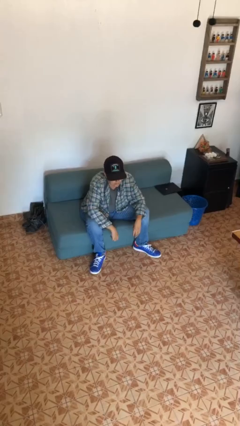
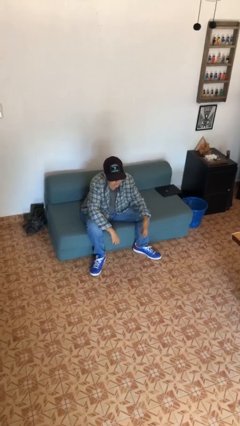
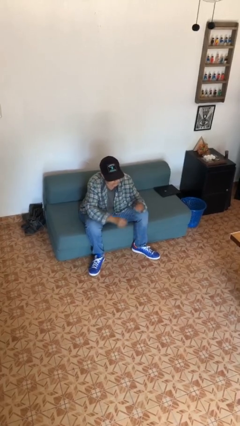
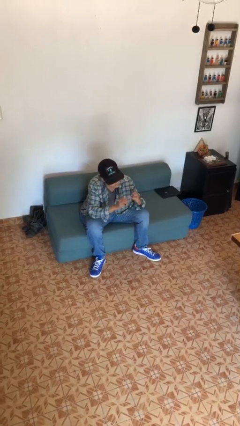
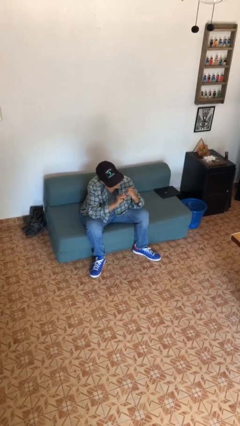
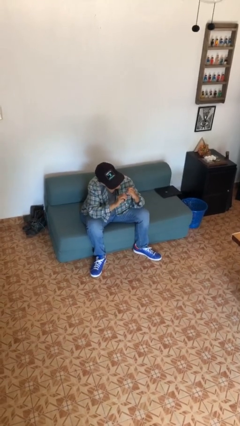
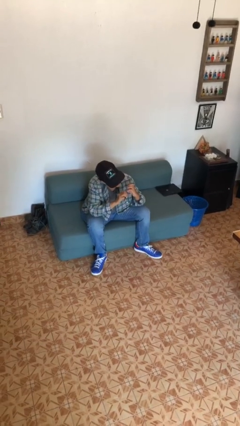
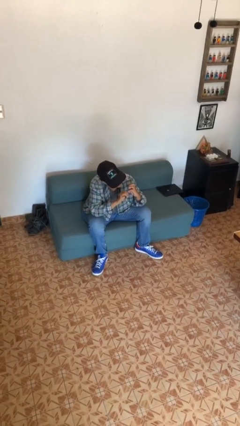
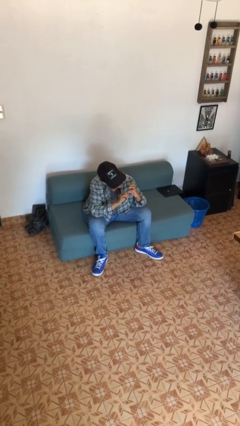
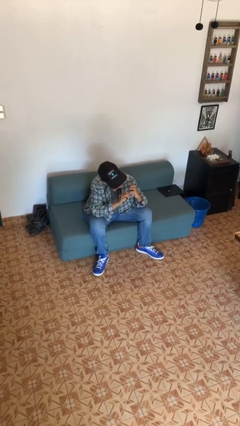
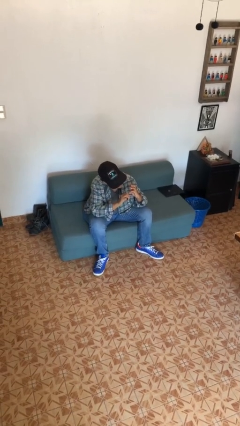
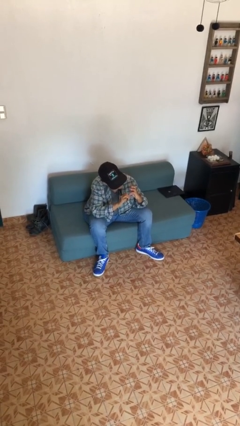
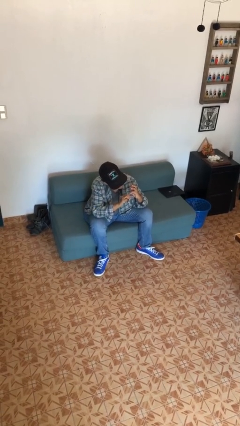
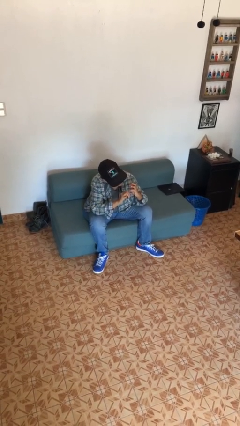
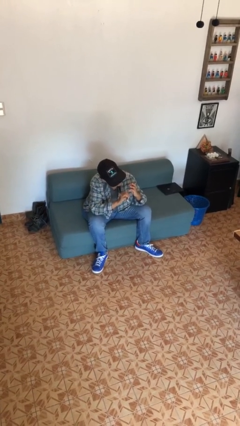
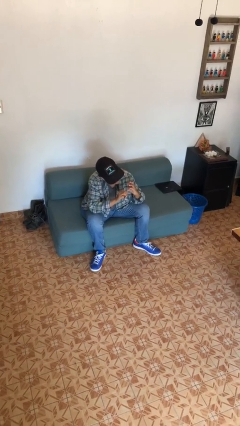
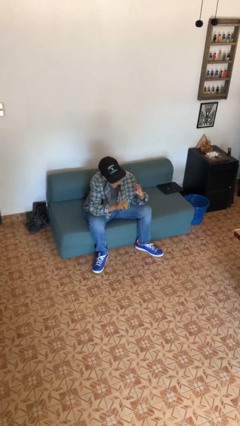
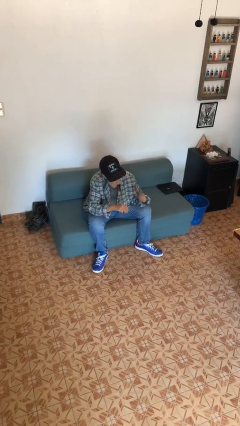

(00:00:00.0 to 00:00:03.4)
person files fingernails

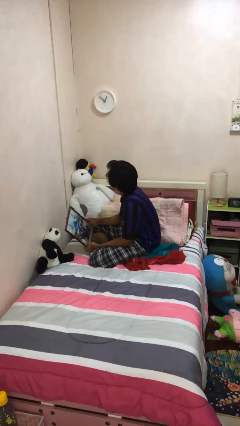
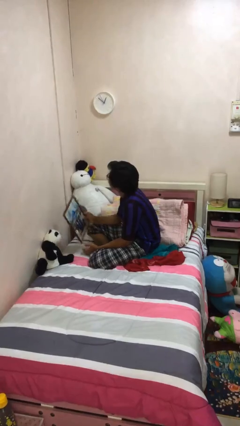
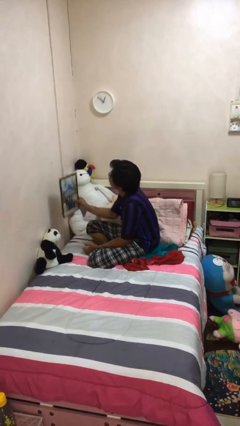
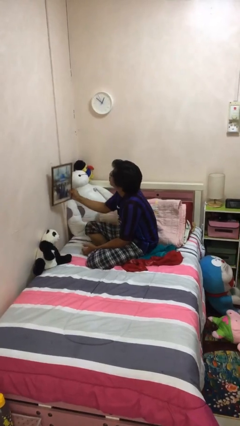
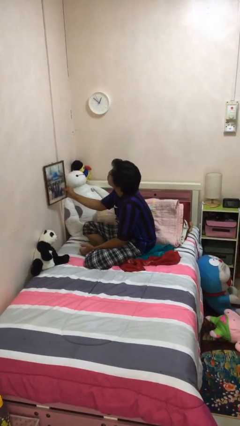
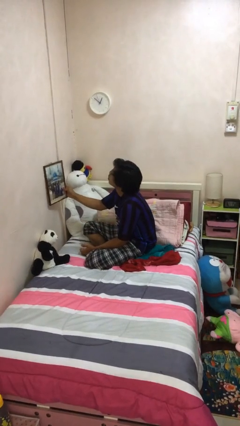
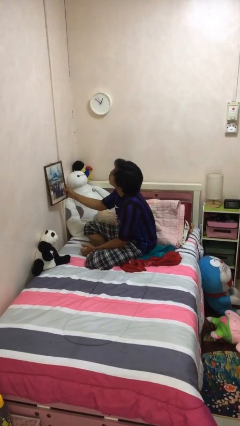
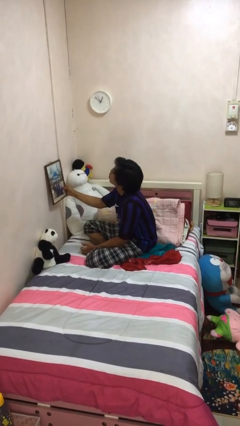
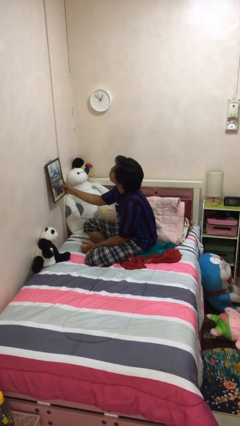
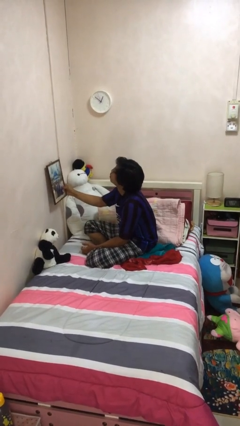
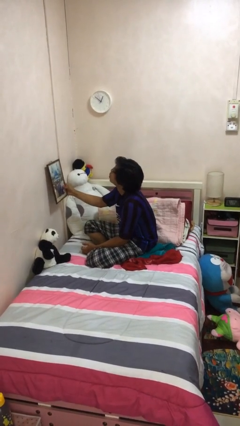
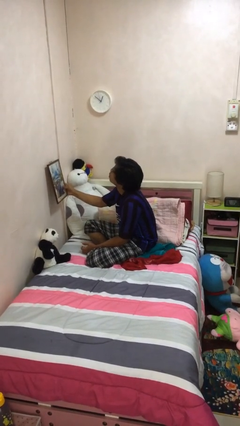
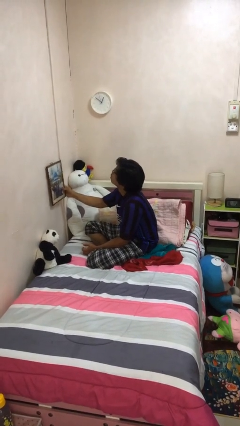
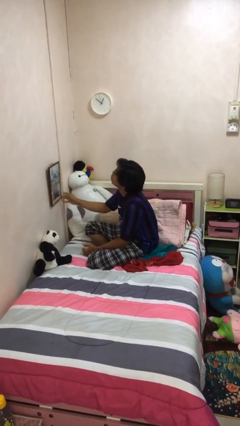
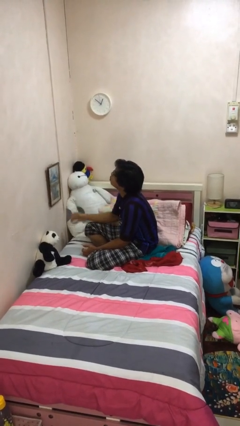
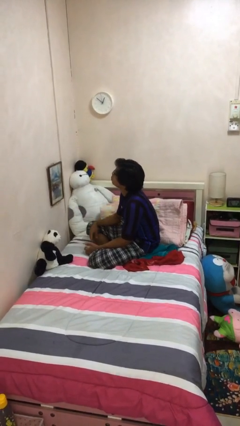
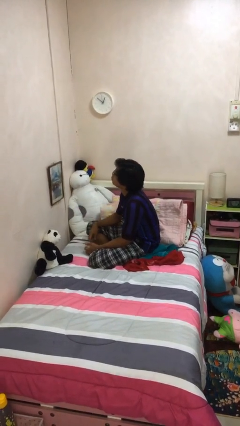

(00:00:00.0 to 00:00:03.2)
person puts up picture frame

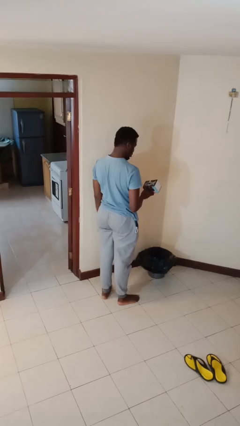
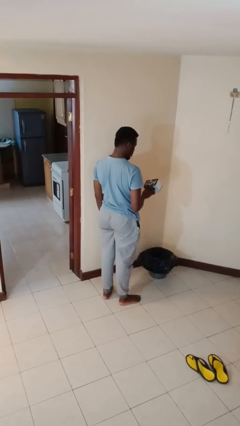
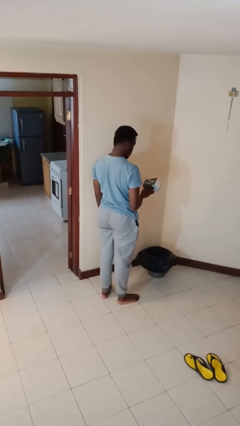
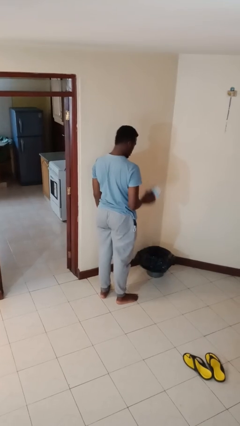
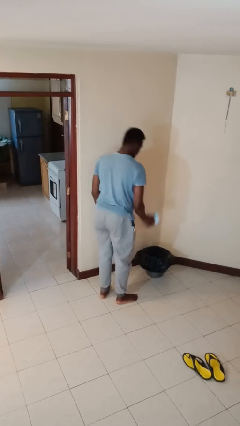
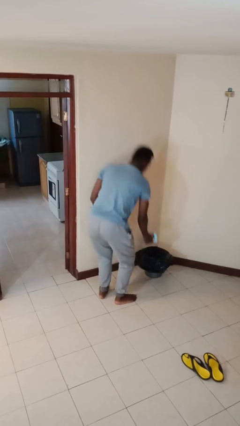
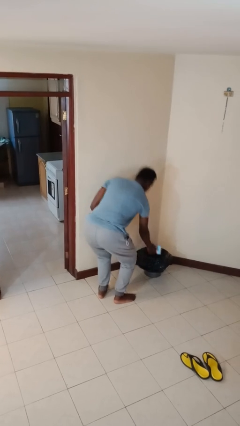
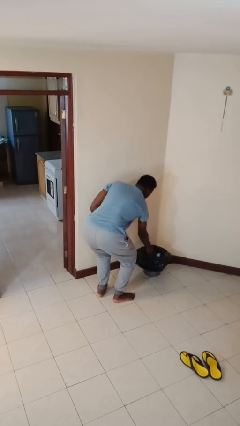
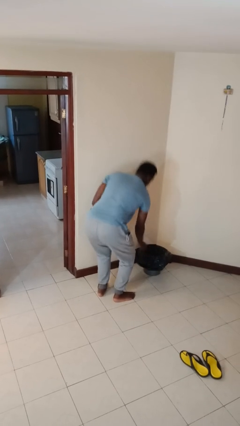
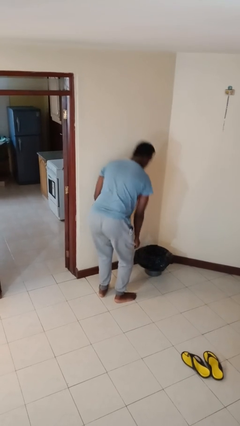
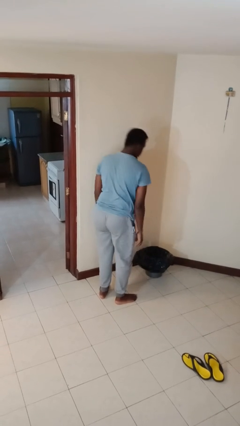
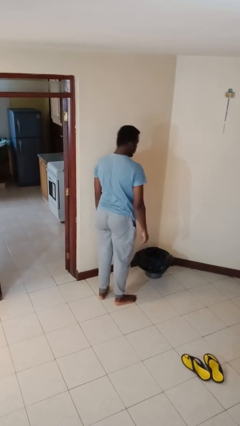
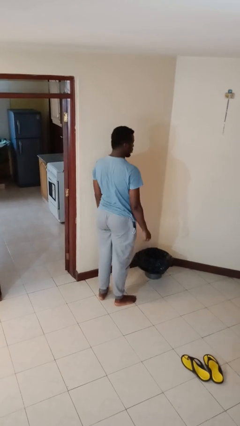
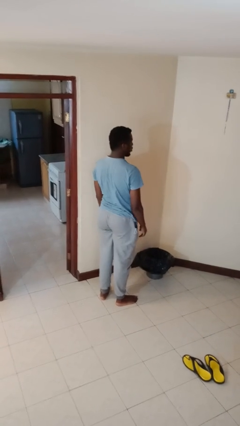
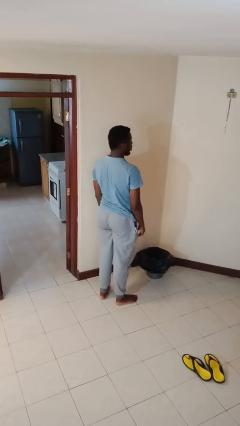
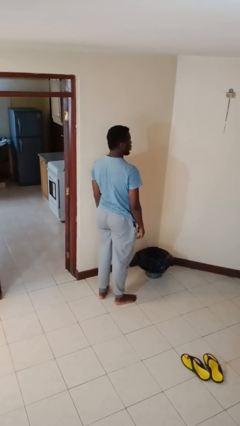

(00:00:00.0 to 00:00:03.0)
person discards trash

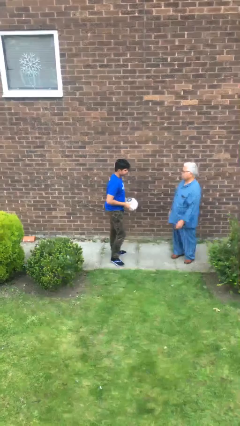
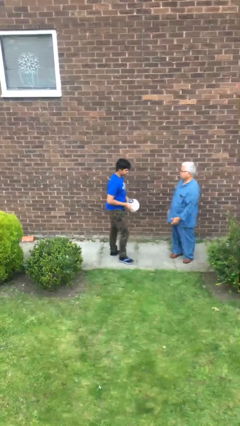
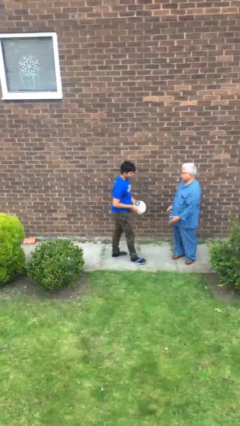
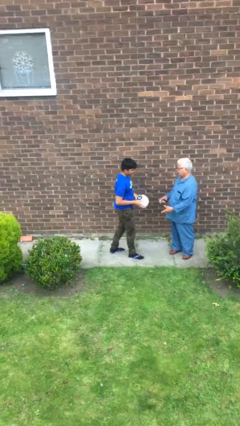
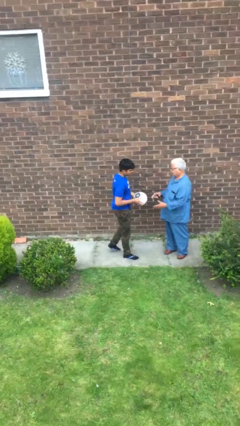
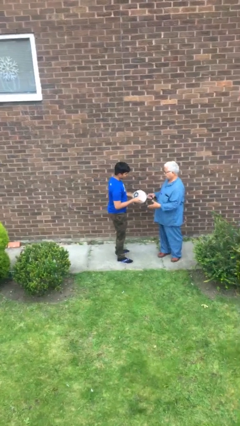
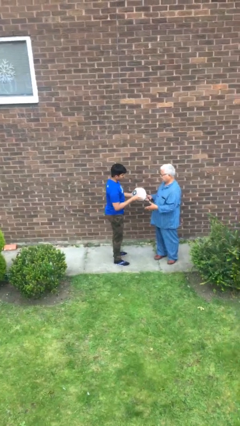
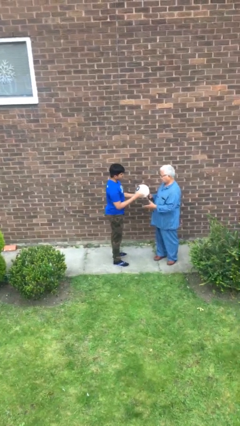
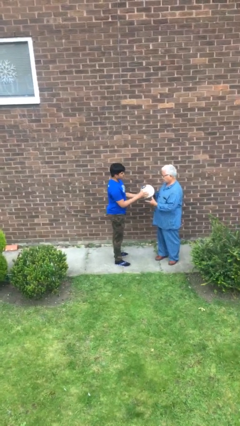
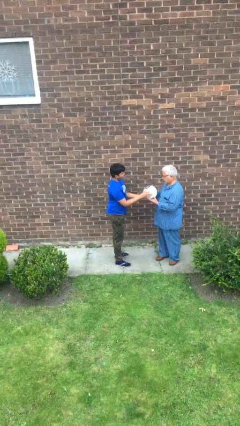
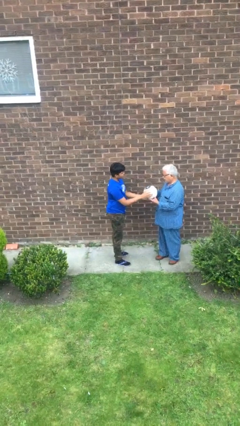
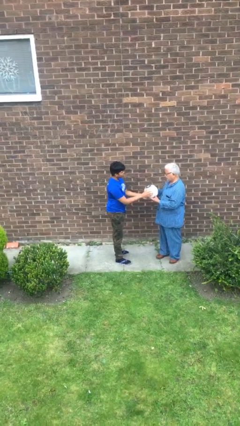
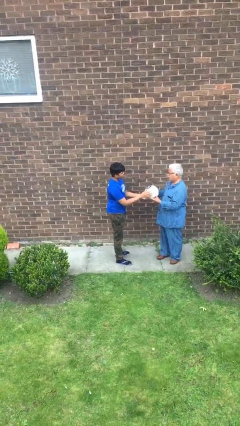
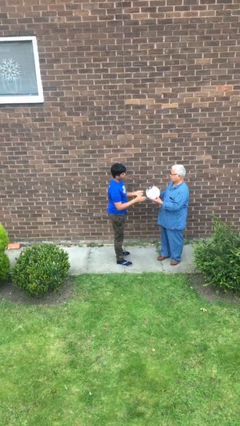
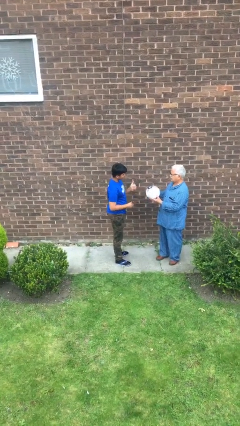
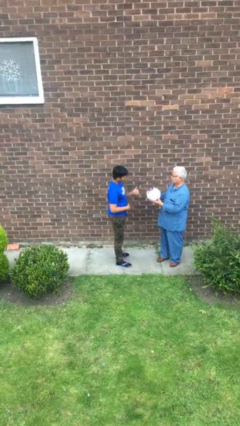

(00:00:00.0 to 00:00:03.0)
person transfers object to person

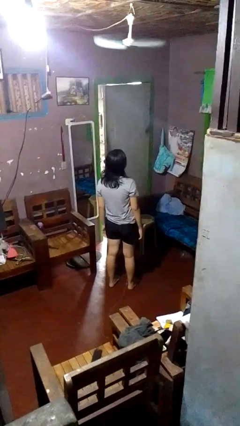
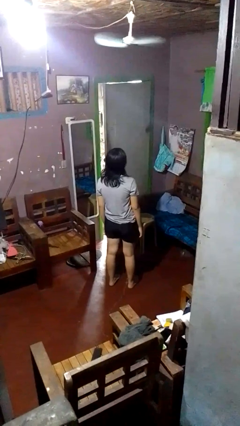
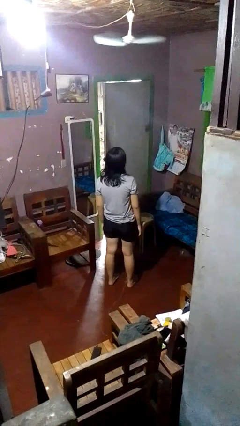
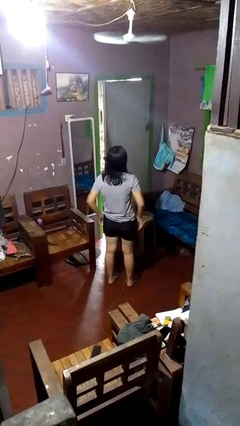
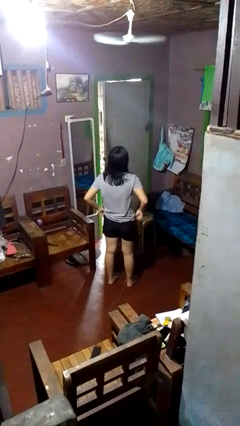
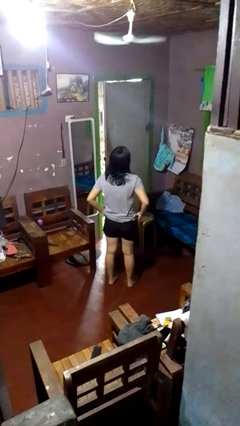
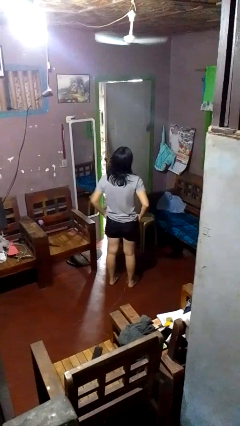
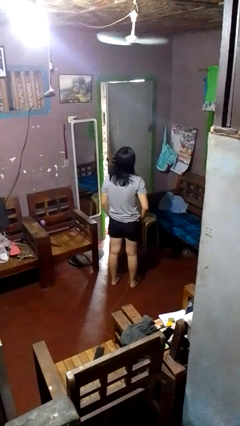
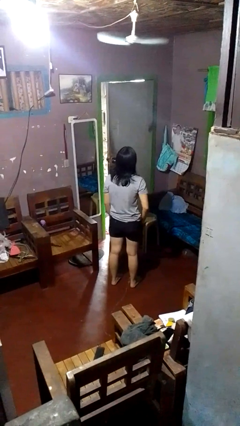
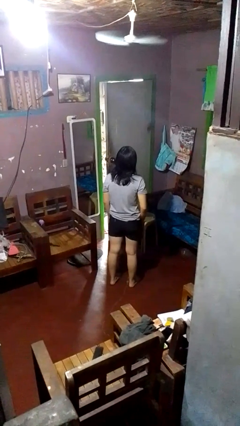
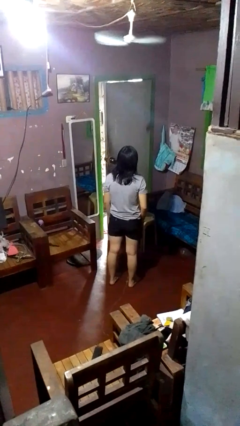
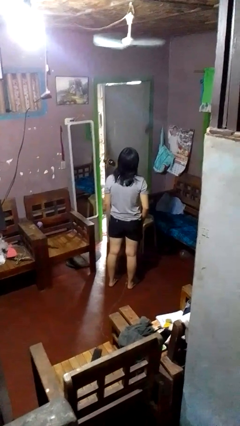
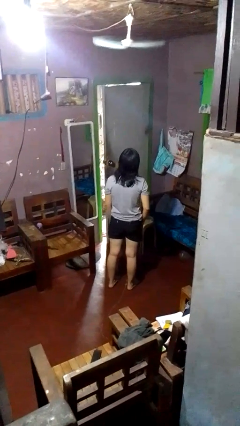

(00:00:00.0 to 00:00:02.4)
person puts hands in back pockets

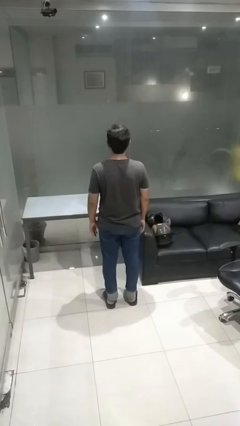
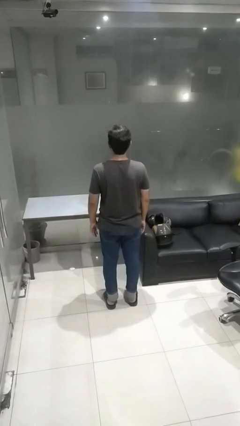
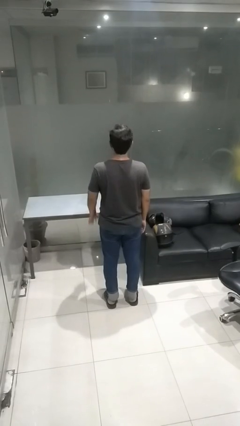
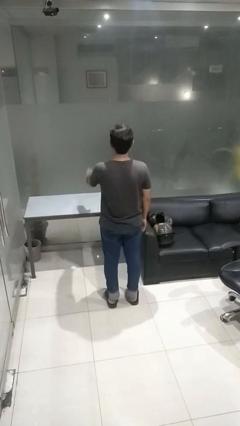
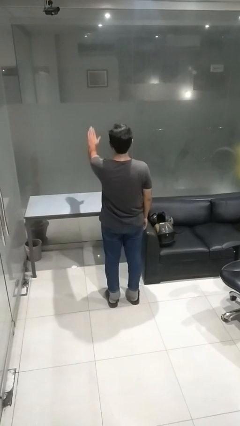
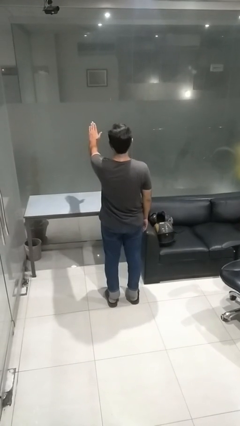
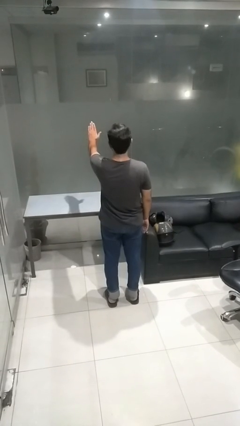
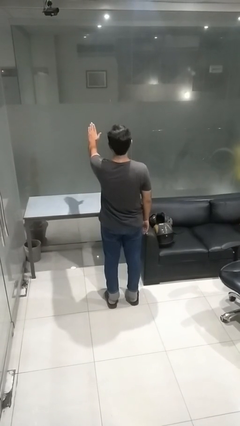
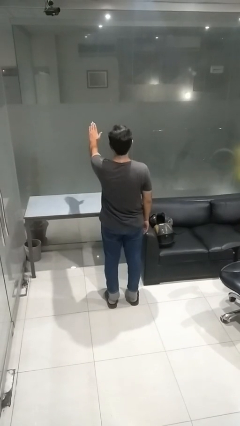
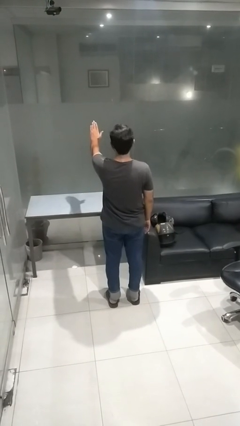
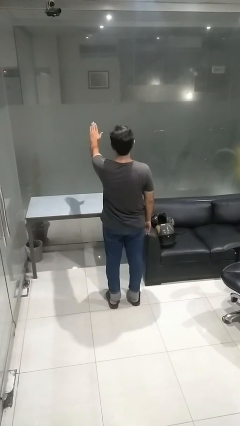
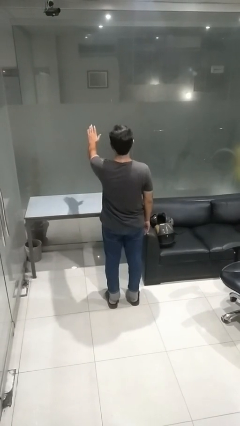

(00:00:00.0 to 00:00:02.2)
person gestures stop

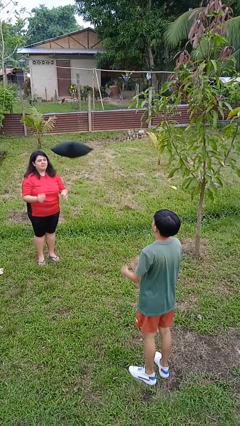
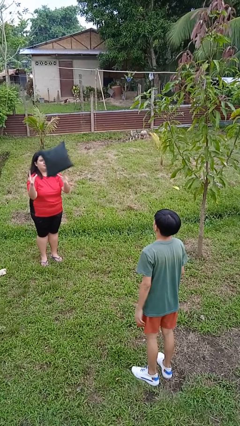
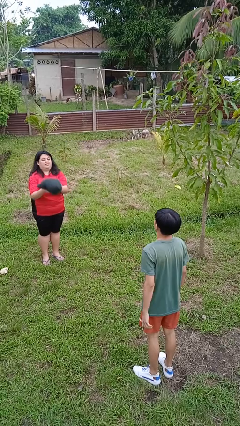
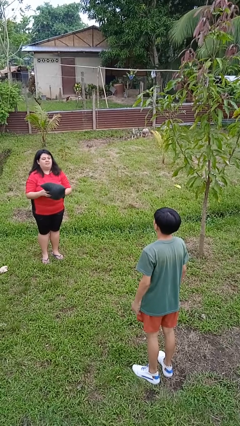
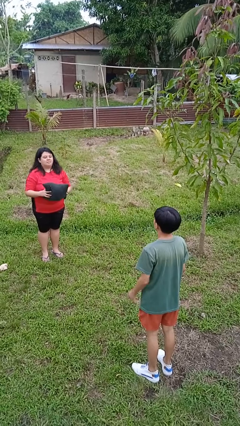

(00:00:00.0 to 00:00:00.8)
person catches object from person
